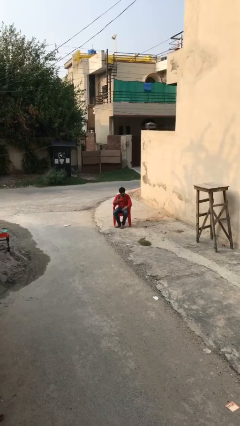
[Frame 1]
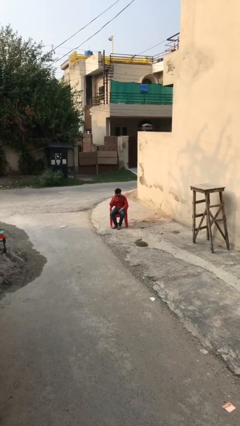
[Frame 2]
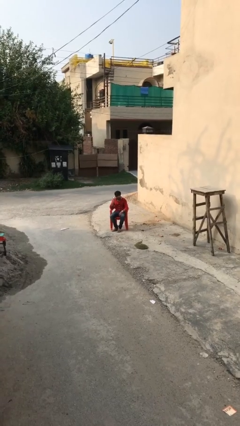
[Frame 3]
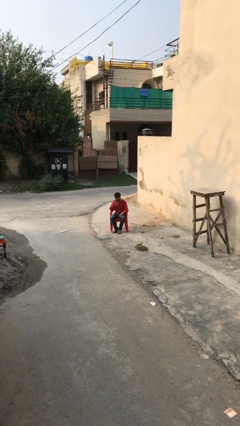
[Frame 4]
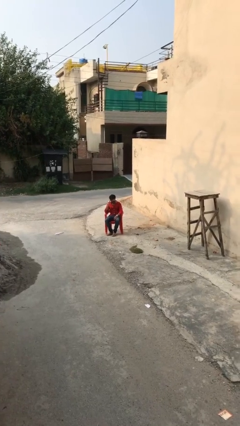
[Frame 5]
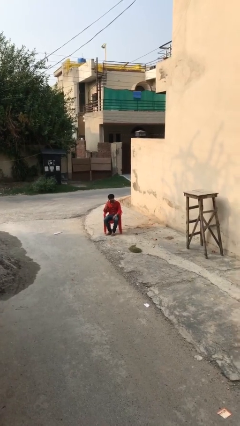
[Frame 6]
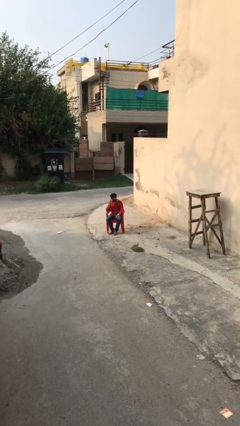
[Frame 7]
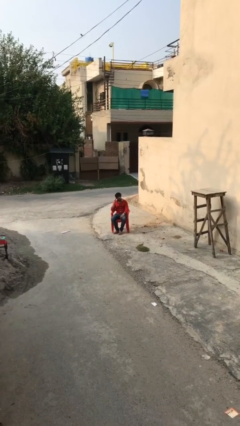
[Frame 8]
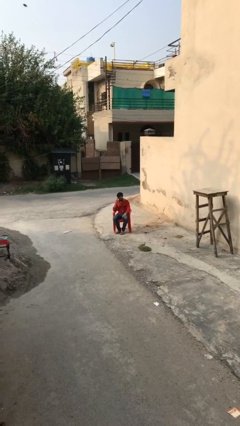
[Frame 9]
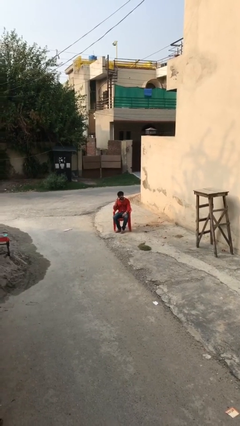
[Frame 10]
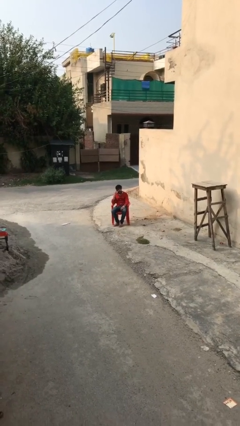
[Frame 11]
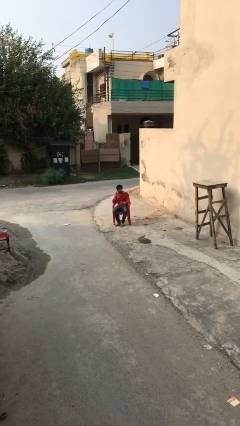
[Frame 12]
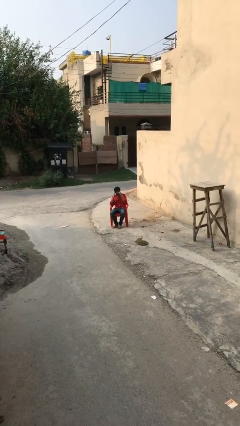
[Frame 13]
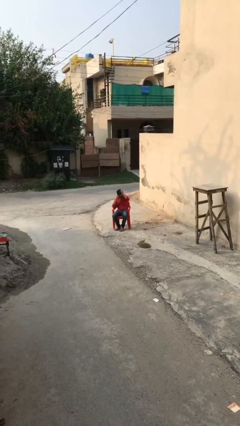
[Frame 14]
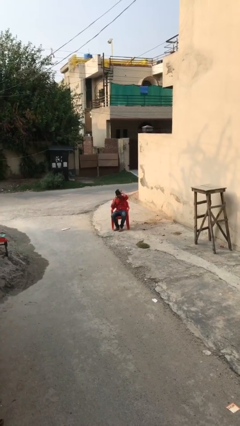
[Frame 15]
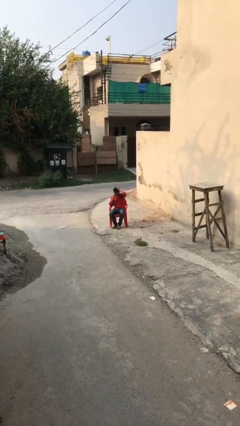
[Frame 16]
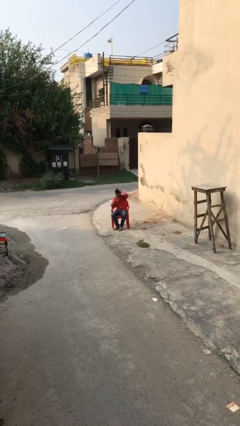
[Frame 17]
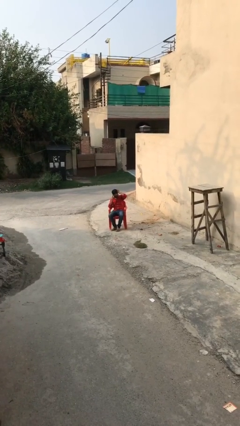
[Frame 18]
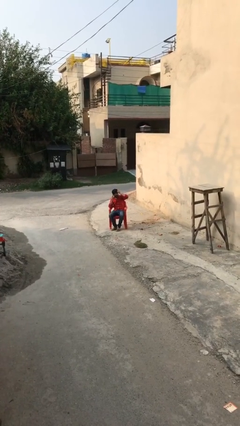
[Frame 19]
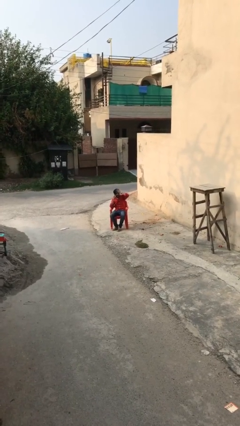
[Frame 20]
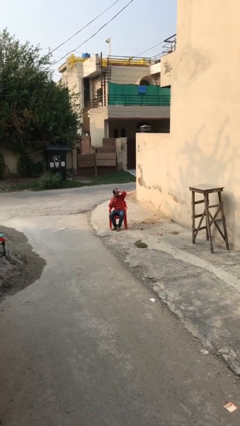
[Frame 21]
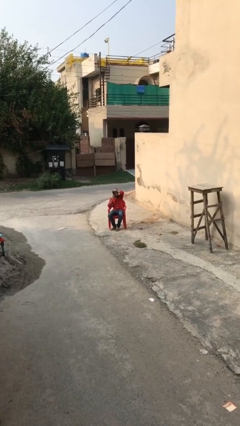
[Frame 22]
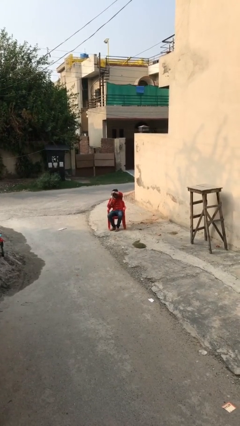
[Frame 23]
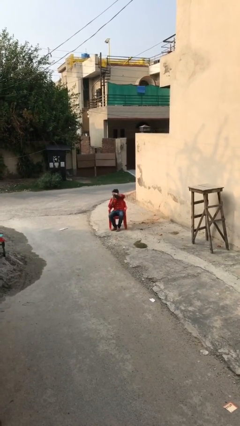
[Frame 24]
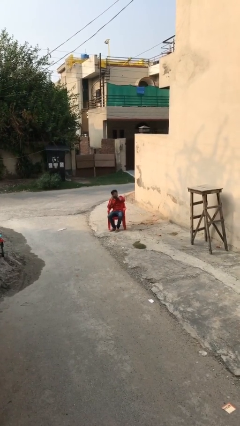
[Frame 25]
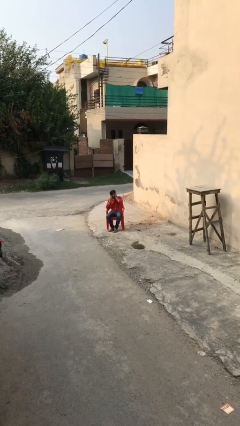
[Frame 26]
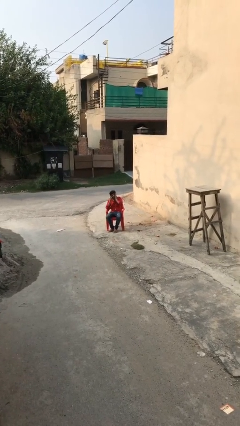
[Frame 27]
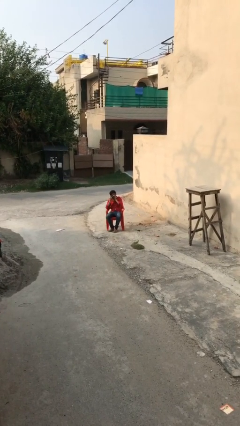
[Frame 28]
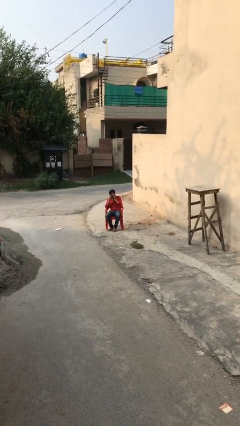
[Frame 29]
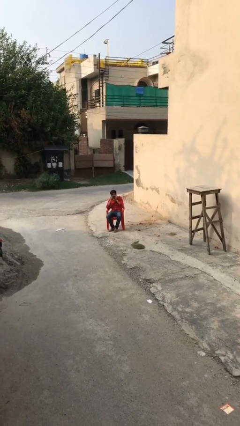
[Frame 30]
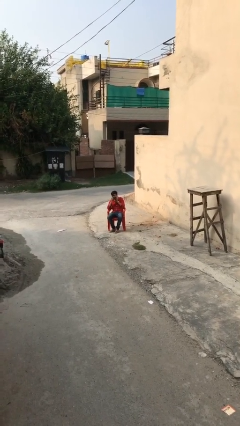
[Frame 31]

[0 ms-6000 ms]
person talks on phone

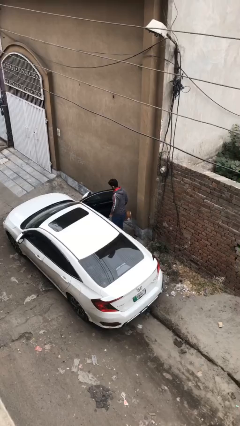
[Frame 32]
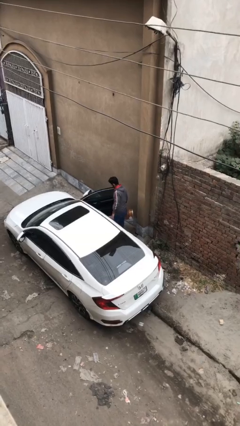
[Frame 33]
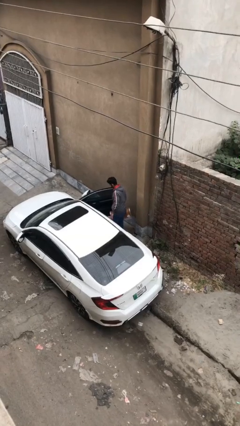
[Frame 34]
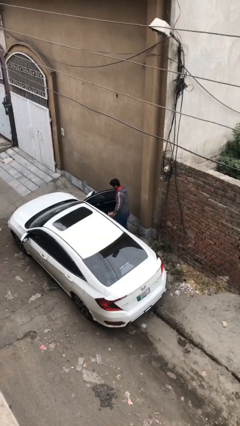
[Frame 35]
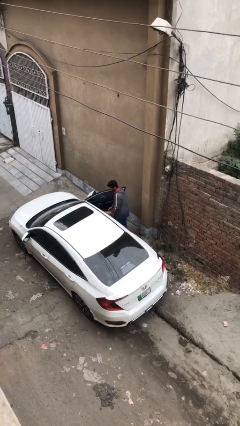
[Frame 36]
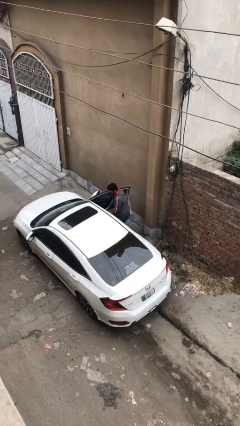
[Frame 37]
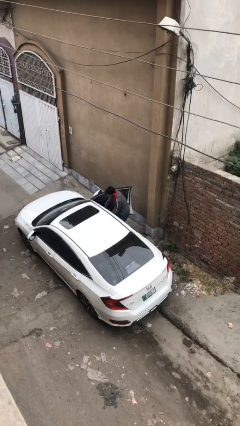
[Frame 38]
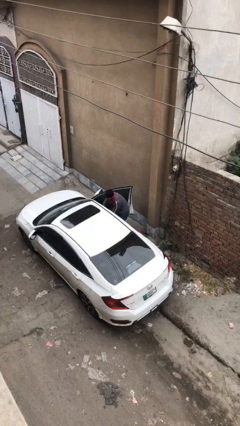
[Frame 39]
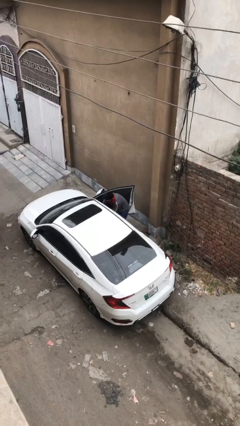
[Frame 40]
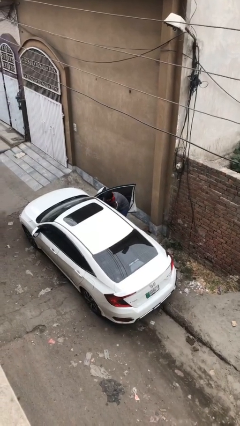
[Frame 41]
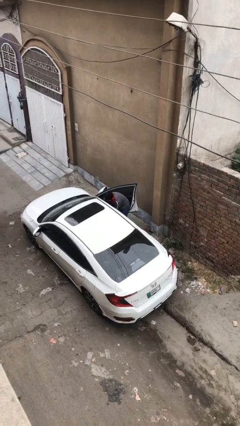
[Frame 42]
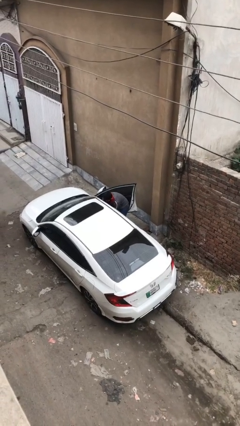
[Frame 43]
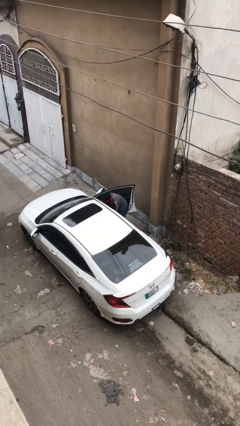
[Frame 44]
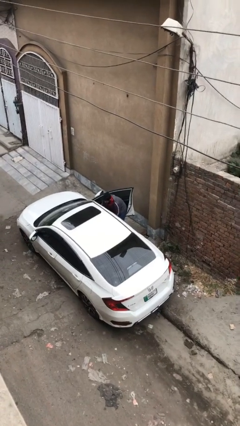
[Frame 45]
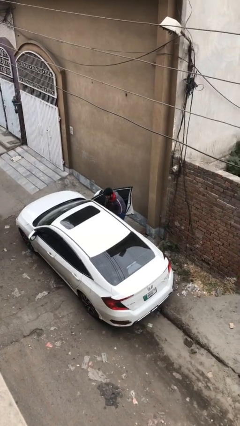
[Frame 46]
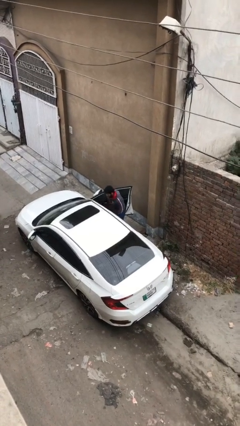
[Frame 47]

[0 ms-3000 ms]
person loads car
